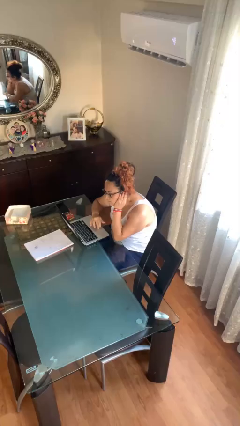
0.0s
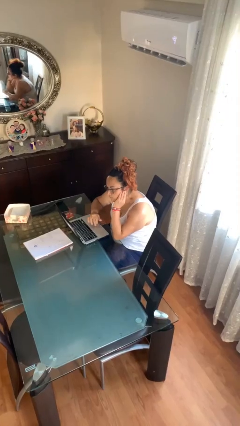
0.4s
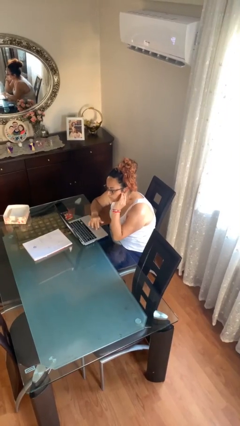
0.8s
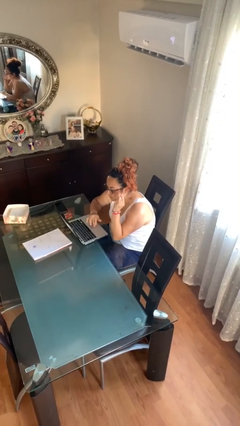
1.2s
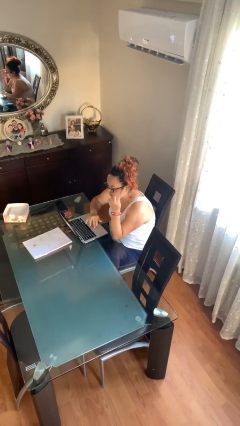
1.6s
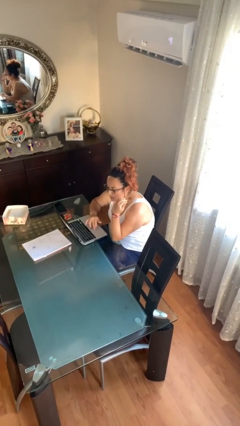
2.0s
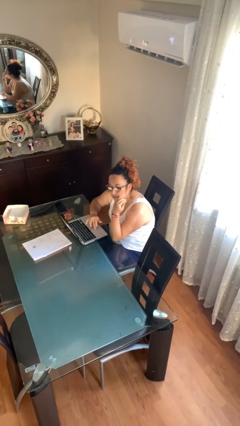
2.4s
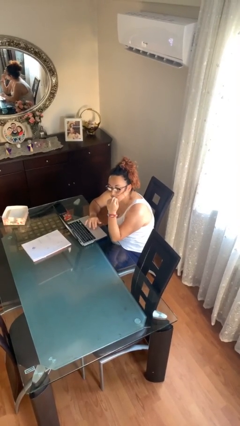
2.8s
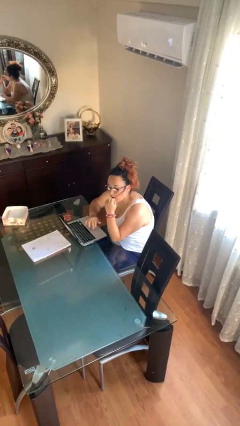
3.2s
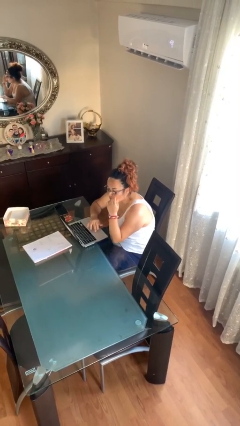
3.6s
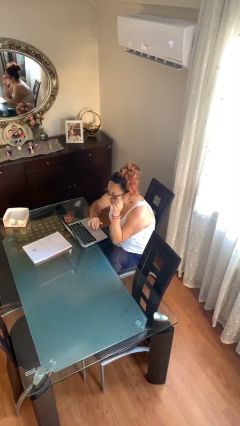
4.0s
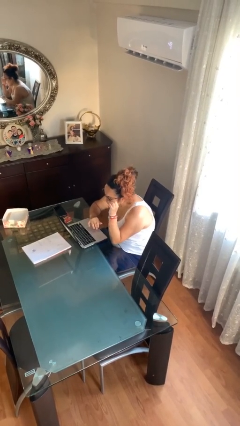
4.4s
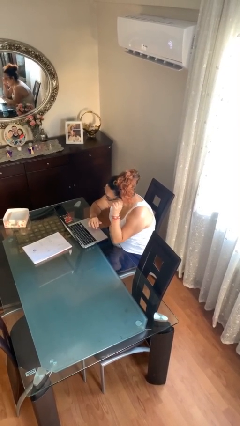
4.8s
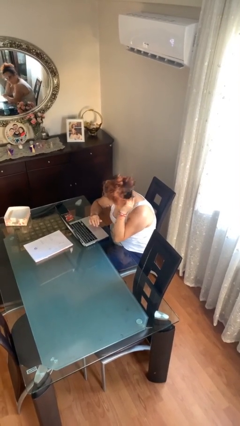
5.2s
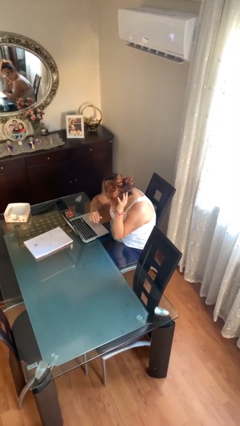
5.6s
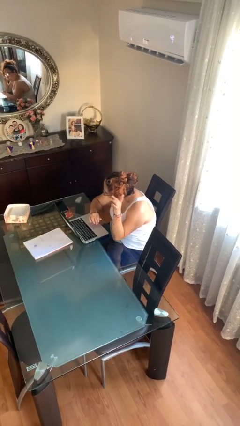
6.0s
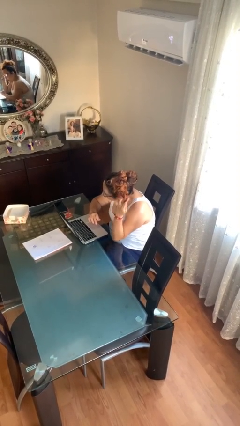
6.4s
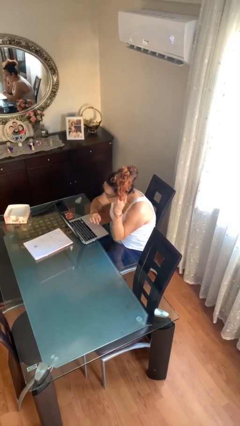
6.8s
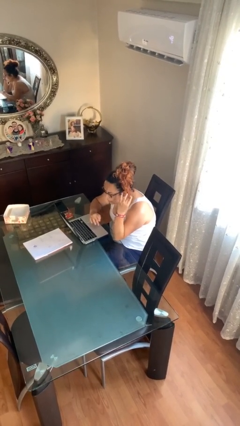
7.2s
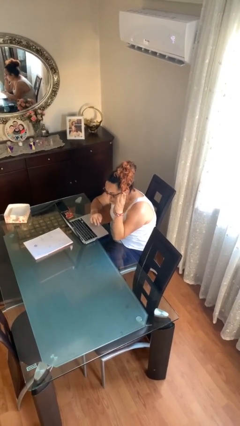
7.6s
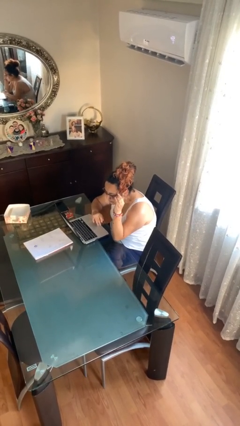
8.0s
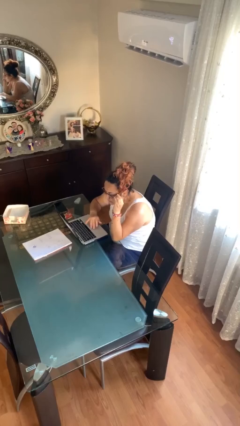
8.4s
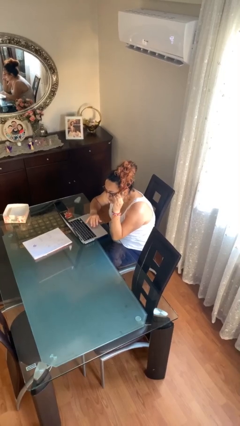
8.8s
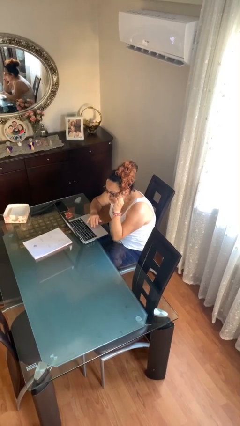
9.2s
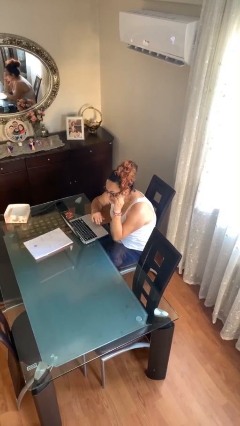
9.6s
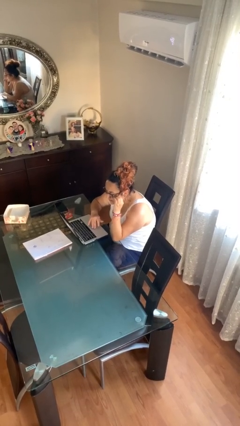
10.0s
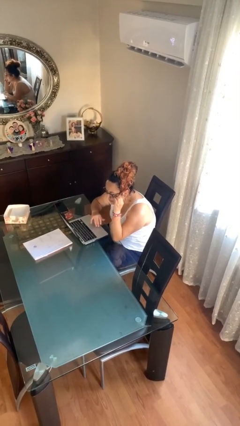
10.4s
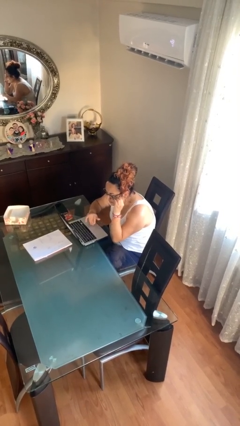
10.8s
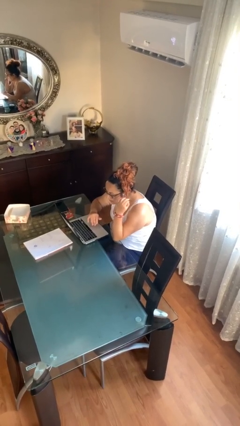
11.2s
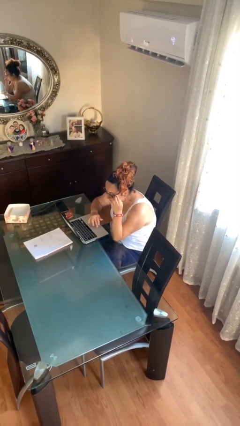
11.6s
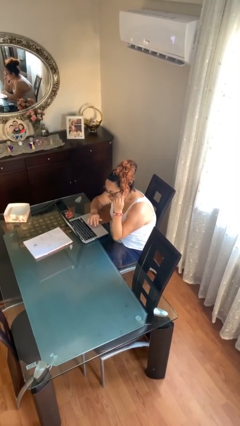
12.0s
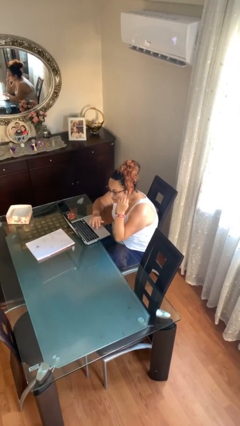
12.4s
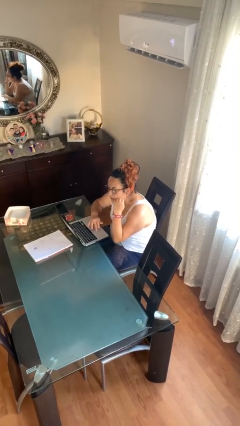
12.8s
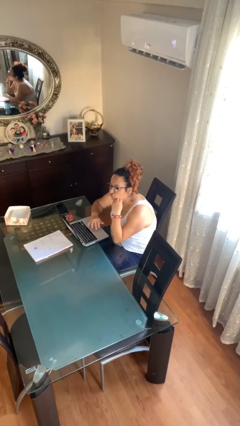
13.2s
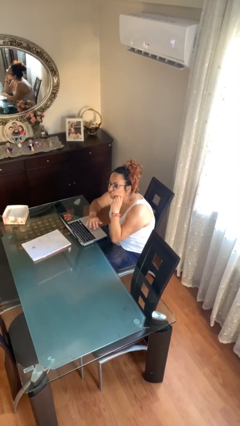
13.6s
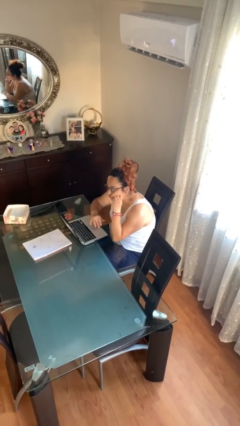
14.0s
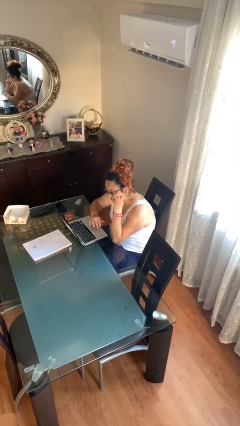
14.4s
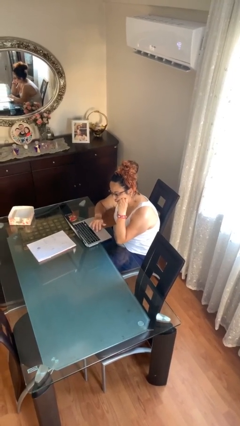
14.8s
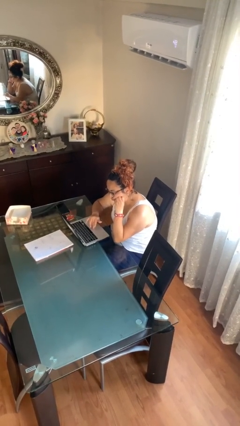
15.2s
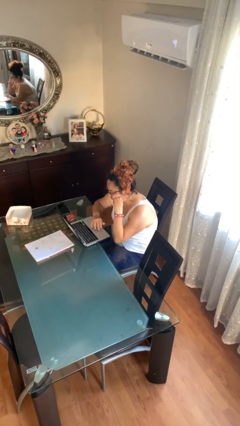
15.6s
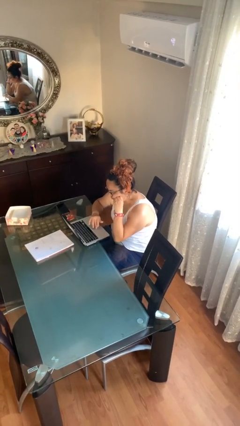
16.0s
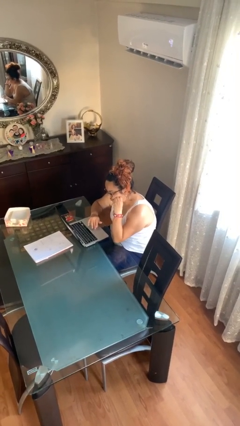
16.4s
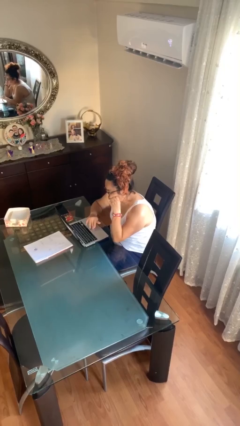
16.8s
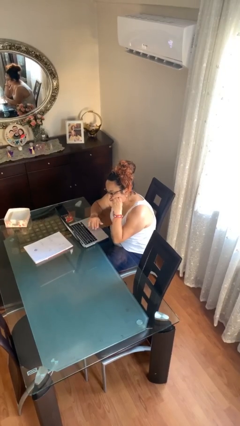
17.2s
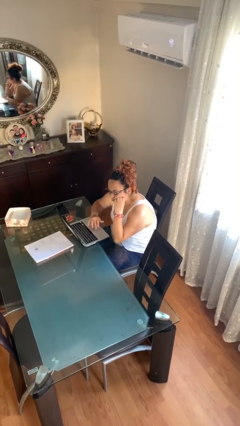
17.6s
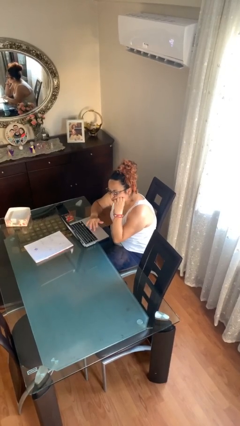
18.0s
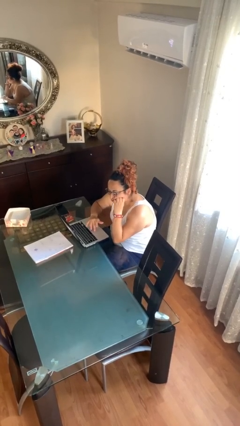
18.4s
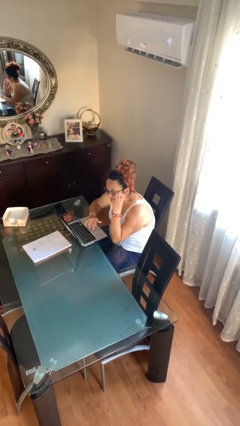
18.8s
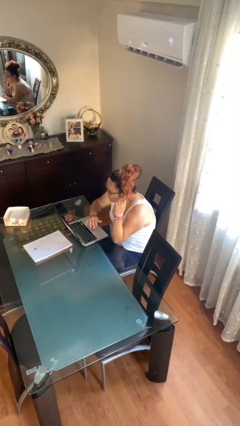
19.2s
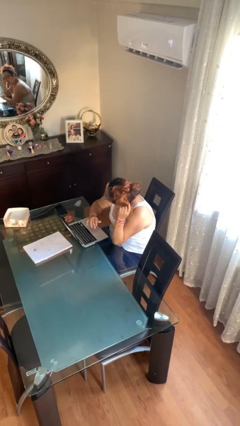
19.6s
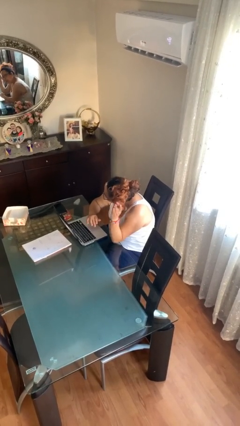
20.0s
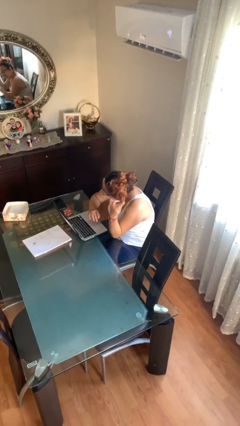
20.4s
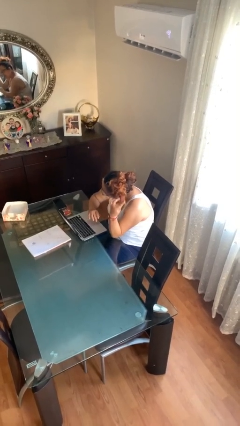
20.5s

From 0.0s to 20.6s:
person interacts with laptop

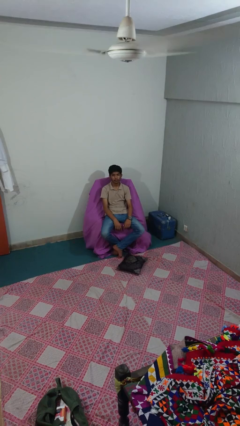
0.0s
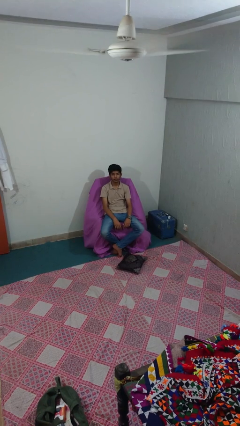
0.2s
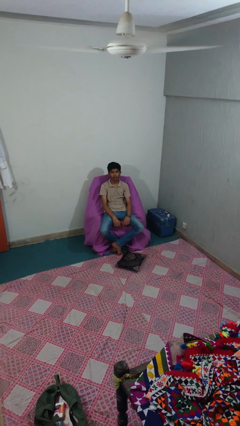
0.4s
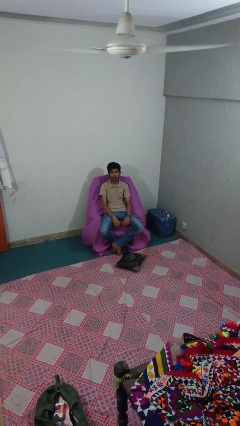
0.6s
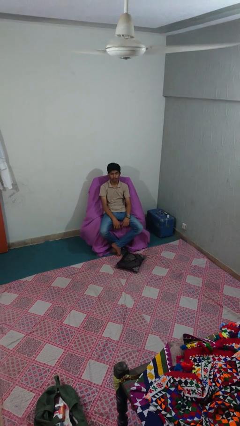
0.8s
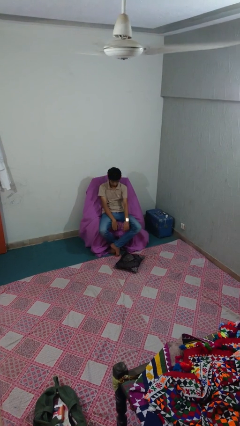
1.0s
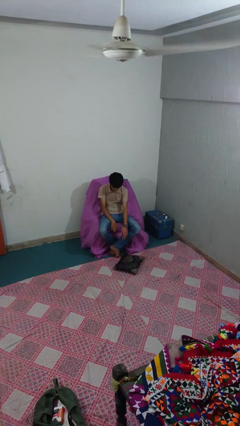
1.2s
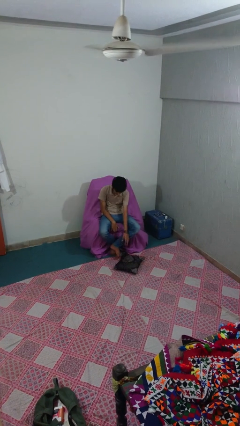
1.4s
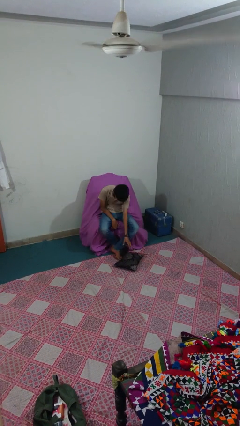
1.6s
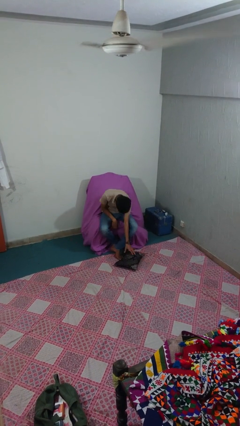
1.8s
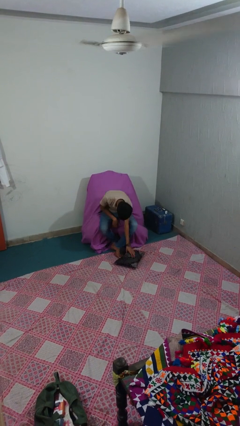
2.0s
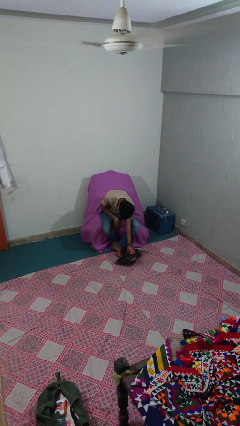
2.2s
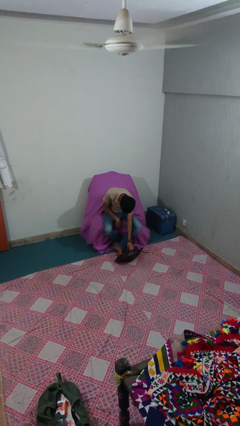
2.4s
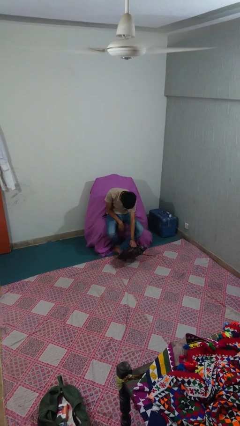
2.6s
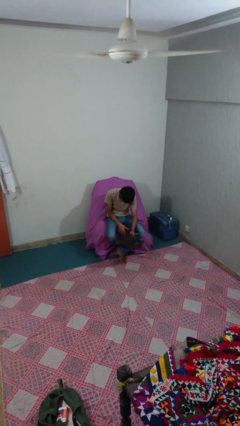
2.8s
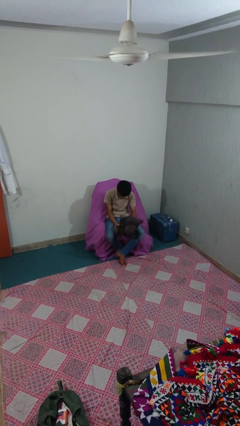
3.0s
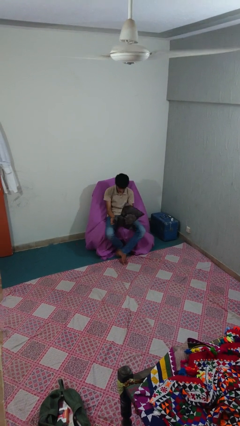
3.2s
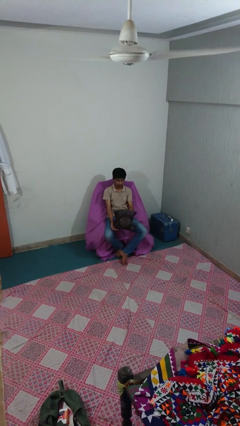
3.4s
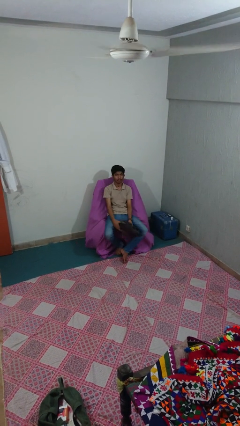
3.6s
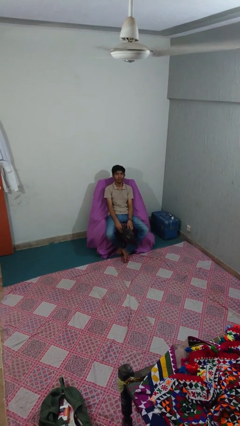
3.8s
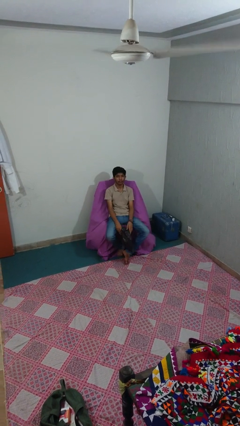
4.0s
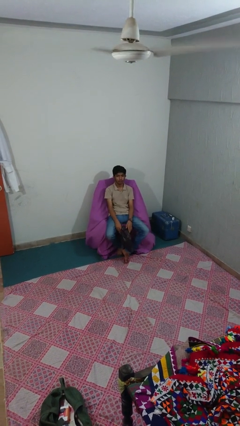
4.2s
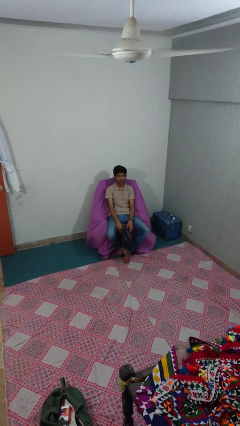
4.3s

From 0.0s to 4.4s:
person picks up object from floor

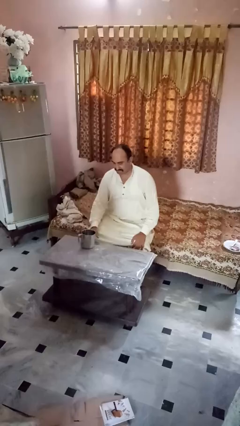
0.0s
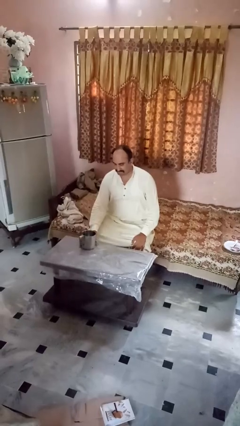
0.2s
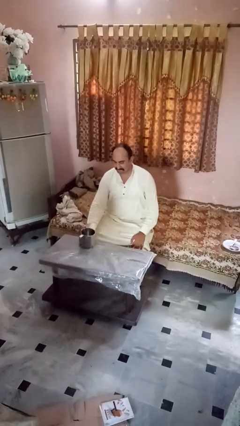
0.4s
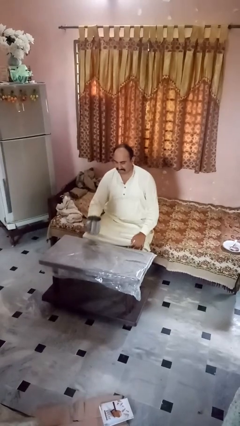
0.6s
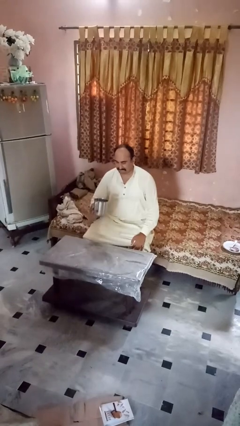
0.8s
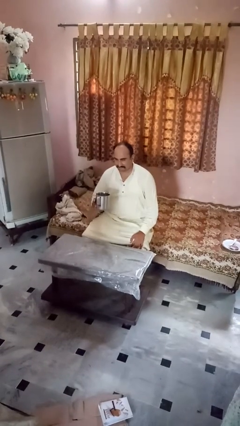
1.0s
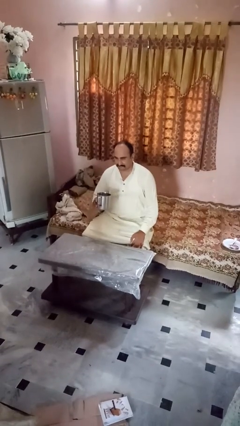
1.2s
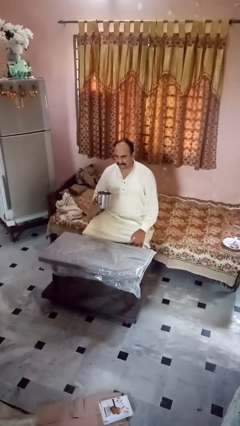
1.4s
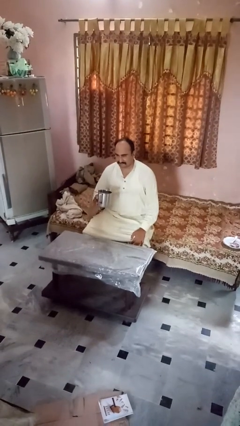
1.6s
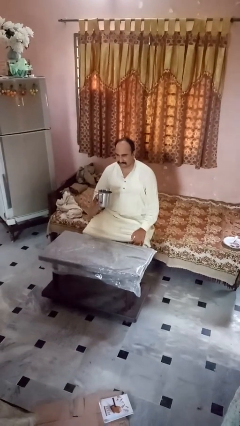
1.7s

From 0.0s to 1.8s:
person picks up object from table

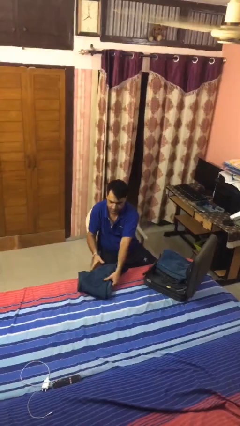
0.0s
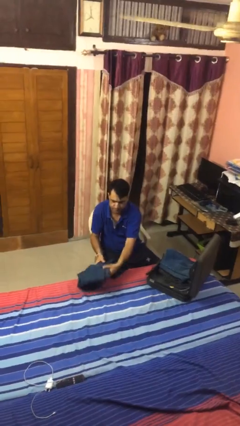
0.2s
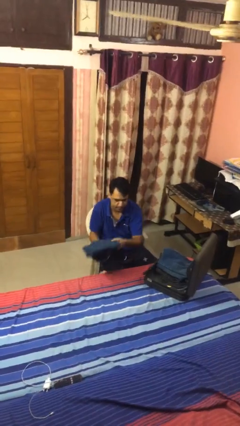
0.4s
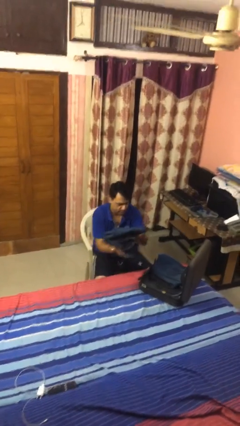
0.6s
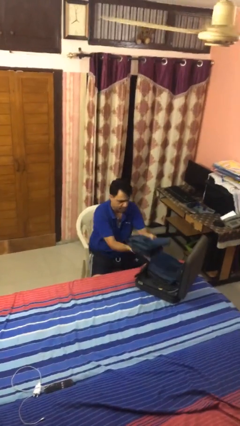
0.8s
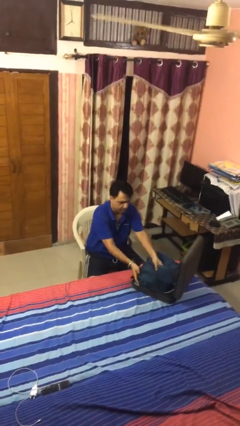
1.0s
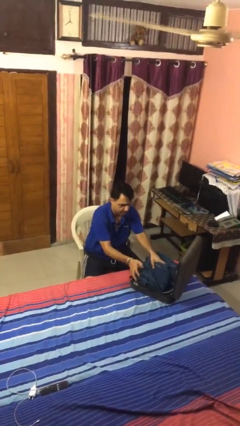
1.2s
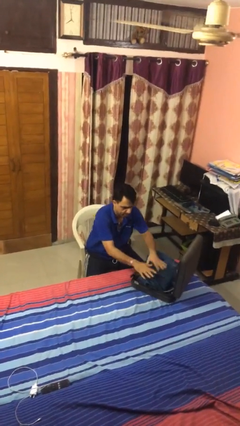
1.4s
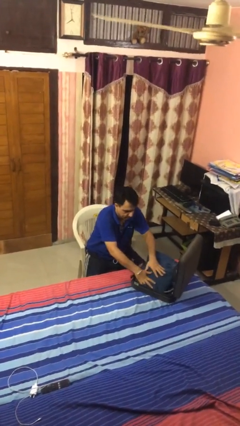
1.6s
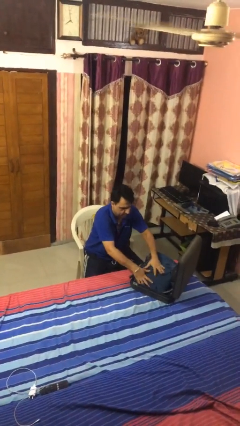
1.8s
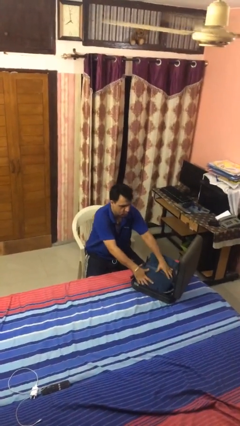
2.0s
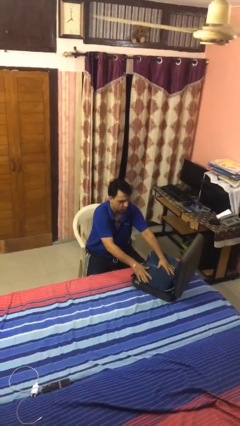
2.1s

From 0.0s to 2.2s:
person loads clothes into suitcase
